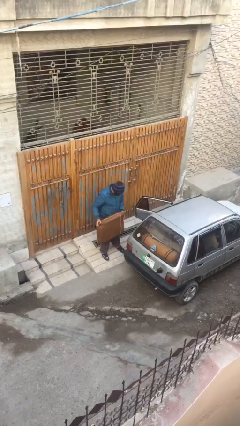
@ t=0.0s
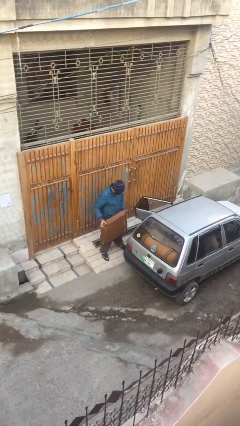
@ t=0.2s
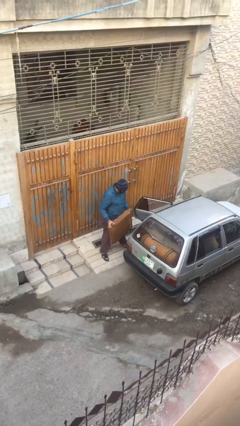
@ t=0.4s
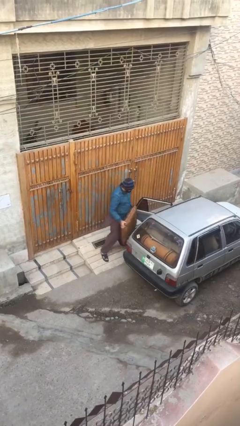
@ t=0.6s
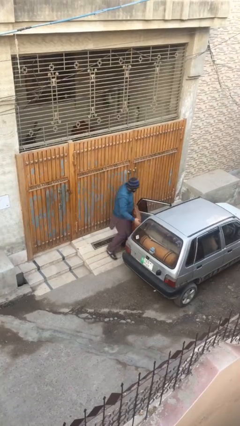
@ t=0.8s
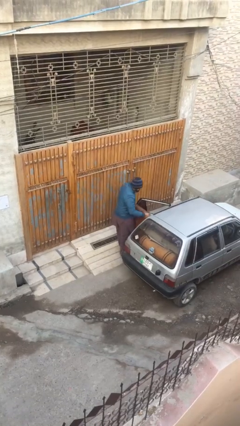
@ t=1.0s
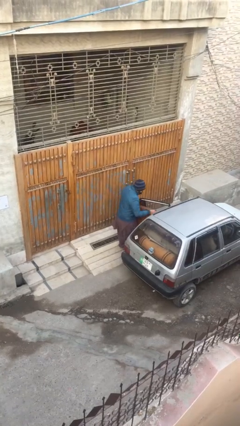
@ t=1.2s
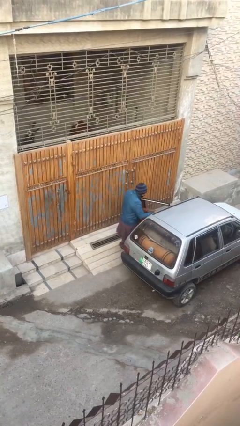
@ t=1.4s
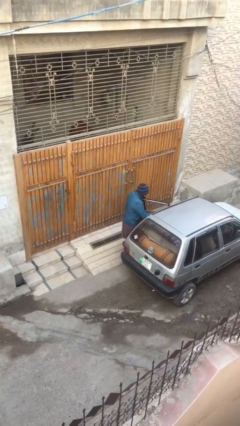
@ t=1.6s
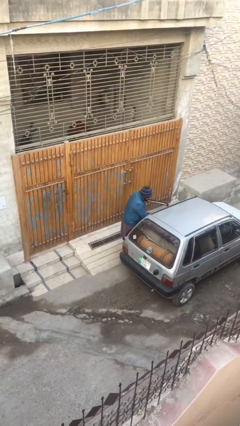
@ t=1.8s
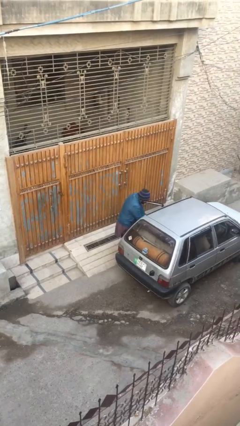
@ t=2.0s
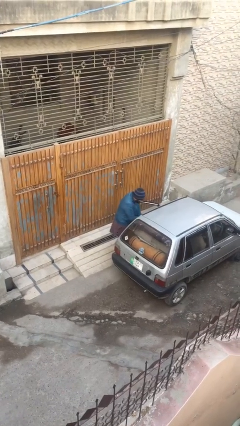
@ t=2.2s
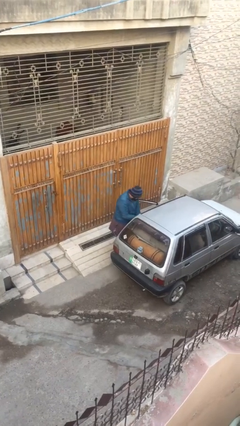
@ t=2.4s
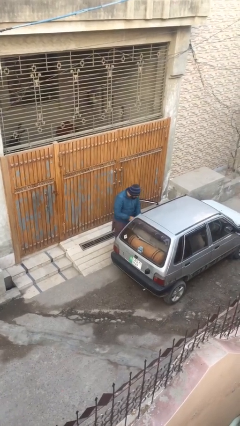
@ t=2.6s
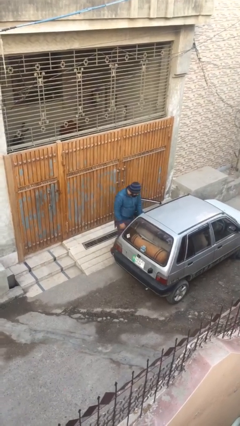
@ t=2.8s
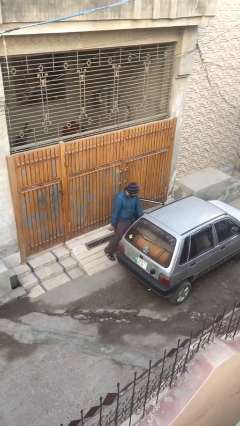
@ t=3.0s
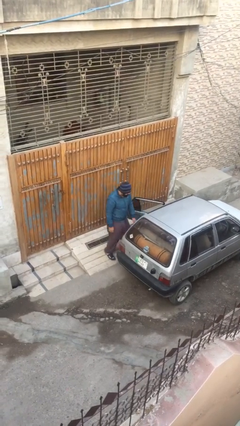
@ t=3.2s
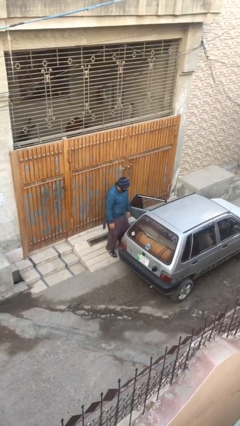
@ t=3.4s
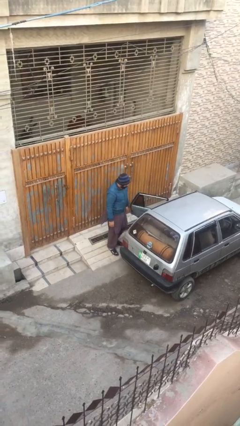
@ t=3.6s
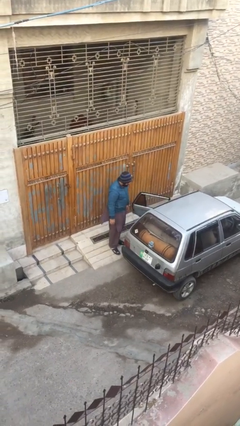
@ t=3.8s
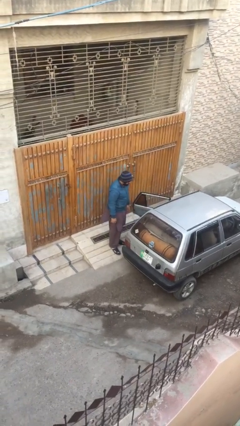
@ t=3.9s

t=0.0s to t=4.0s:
person loads car

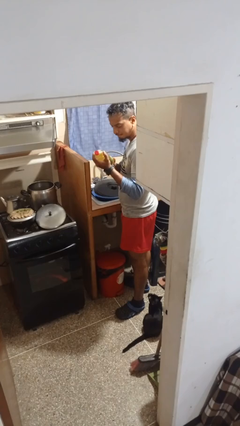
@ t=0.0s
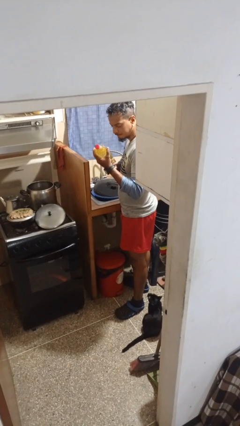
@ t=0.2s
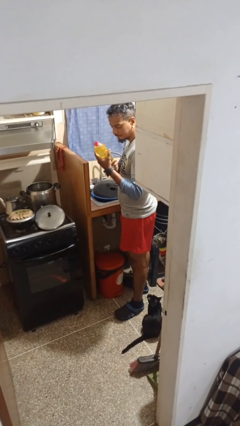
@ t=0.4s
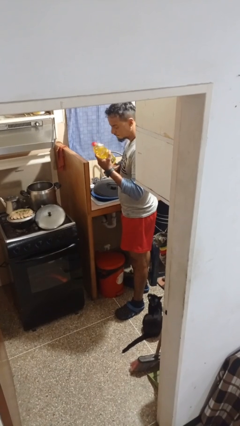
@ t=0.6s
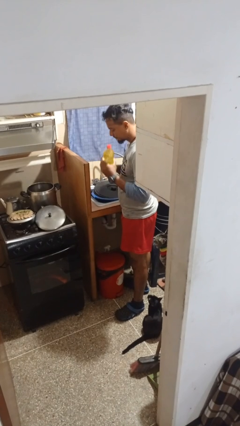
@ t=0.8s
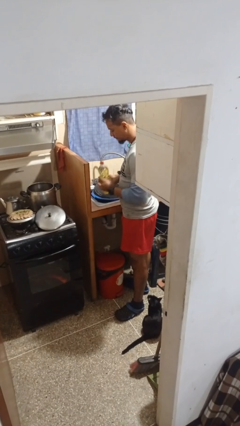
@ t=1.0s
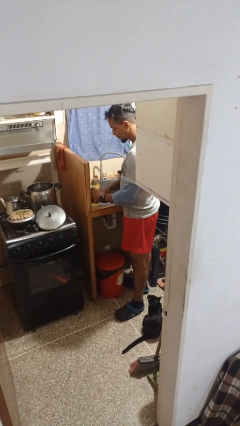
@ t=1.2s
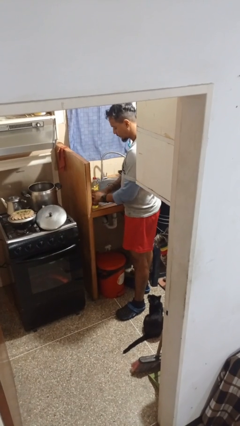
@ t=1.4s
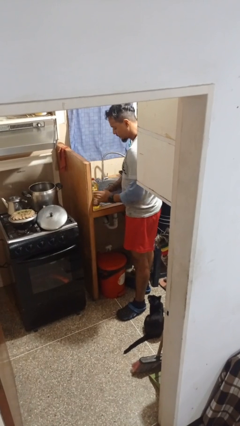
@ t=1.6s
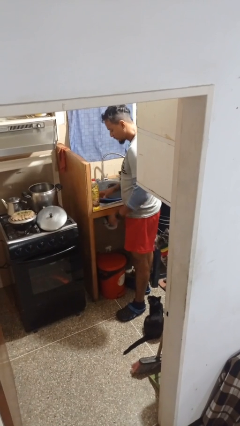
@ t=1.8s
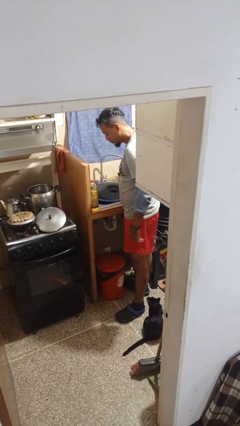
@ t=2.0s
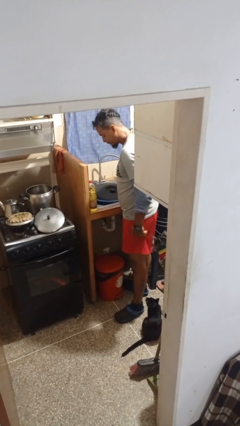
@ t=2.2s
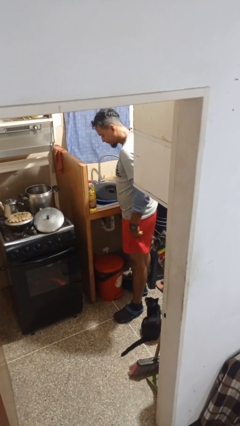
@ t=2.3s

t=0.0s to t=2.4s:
person puts down object on countertop

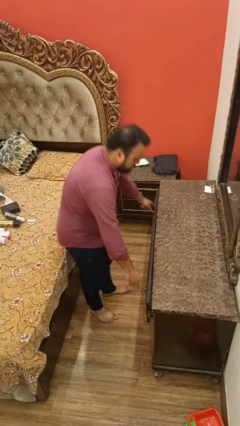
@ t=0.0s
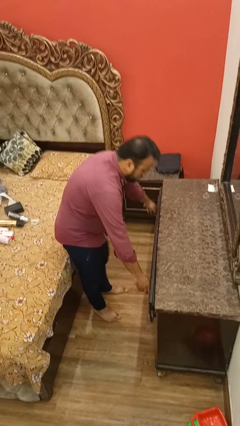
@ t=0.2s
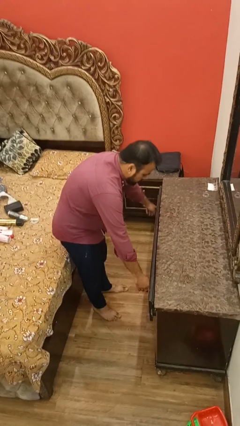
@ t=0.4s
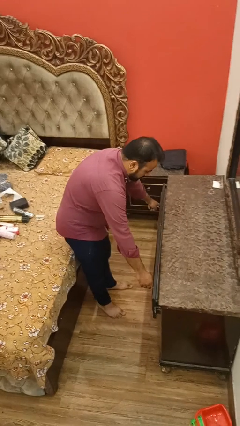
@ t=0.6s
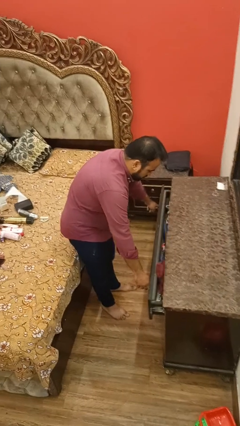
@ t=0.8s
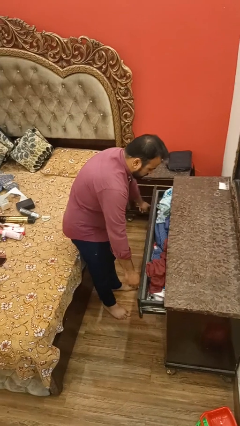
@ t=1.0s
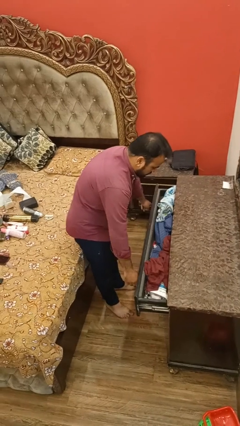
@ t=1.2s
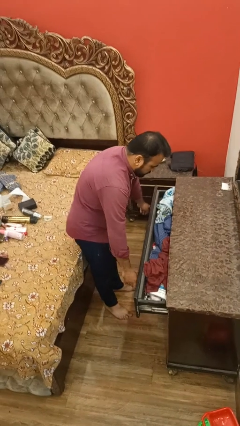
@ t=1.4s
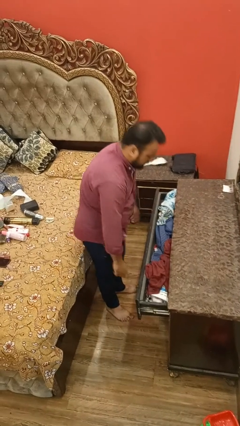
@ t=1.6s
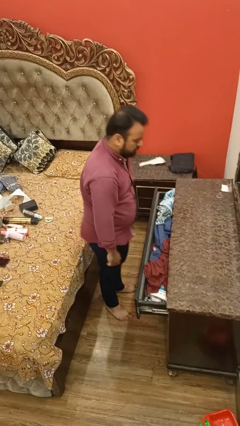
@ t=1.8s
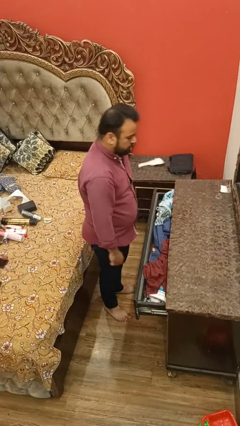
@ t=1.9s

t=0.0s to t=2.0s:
person opens dresser drawer

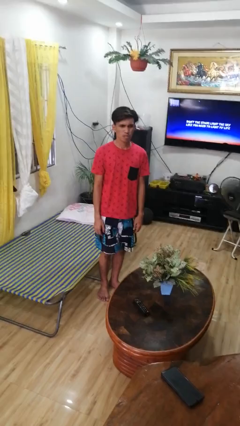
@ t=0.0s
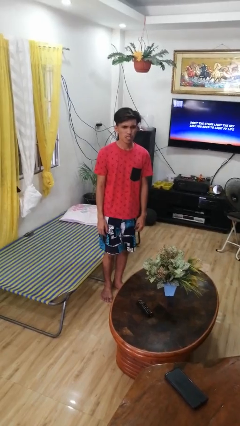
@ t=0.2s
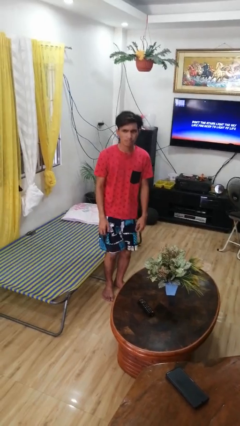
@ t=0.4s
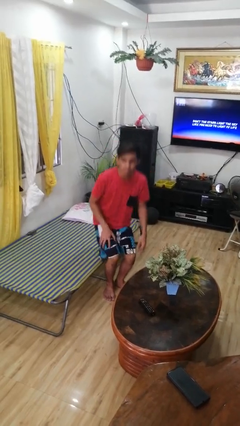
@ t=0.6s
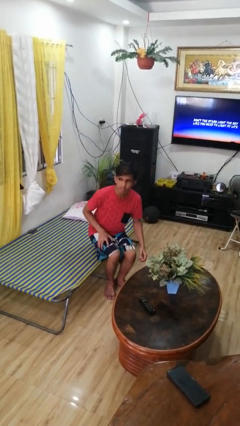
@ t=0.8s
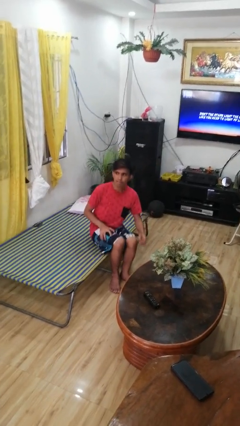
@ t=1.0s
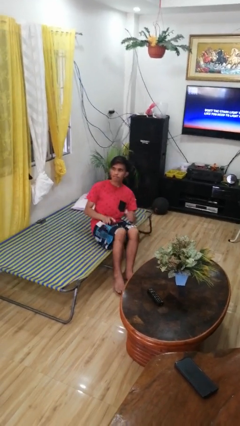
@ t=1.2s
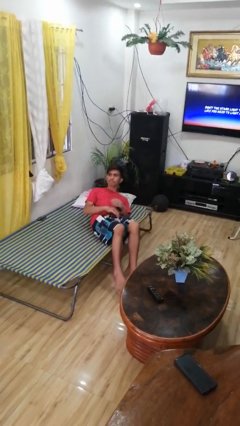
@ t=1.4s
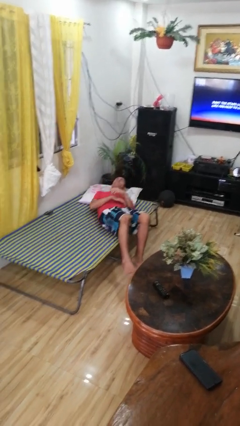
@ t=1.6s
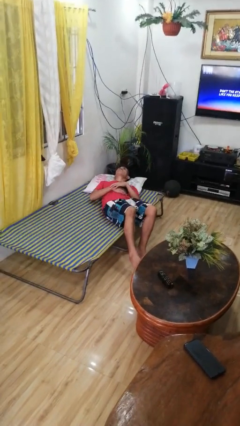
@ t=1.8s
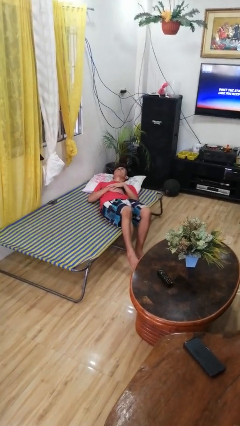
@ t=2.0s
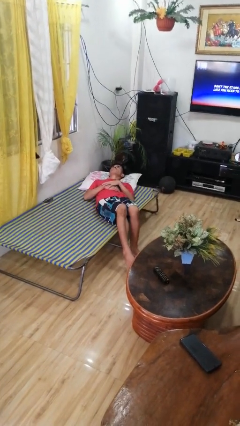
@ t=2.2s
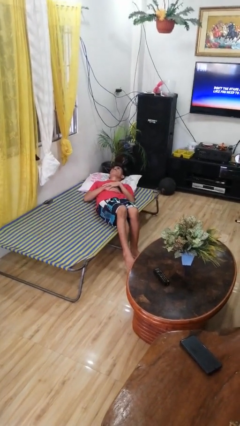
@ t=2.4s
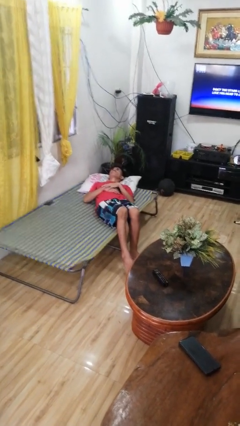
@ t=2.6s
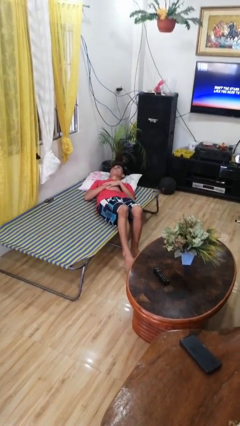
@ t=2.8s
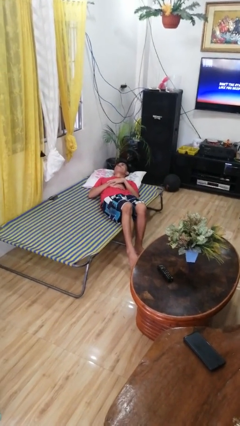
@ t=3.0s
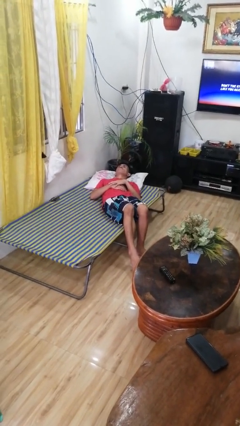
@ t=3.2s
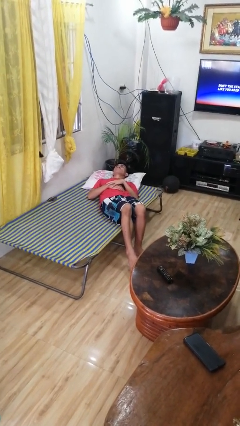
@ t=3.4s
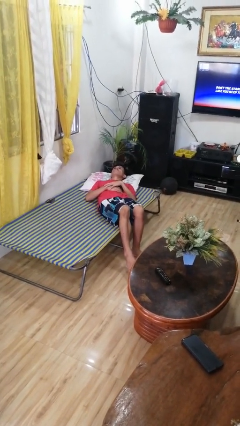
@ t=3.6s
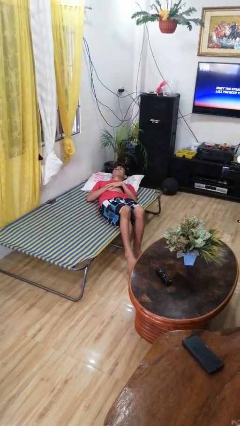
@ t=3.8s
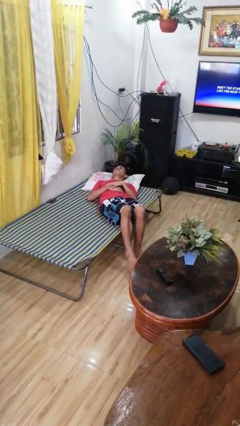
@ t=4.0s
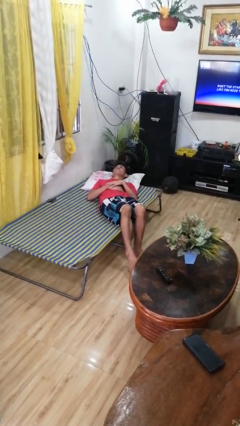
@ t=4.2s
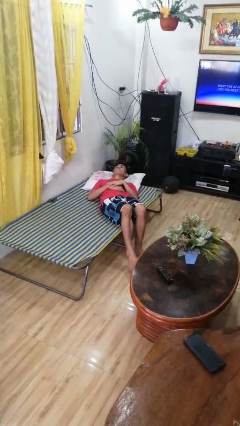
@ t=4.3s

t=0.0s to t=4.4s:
person lies down on bed

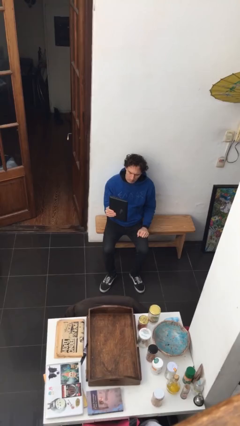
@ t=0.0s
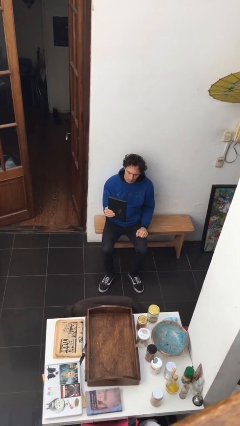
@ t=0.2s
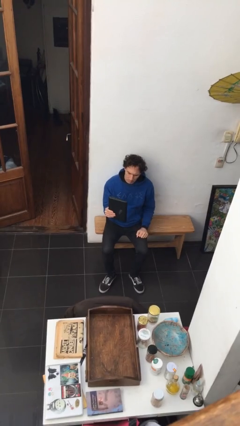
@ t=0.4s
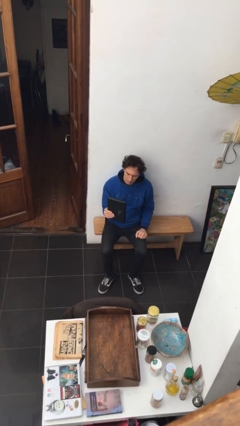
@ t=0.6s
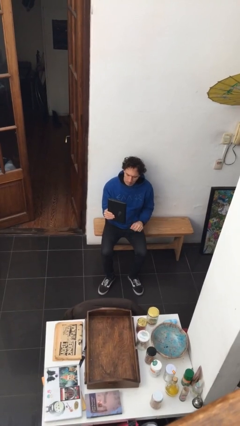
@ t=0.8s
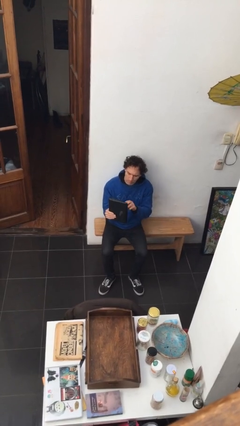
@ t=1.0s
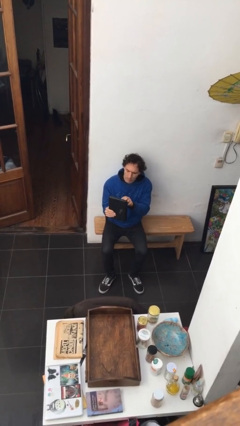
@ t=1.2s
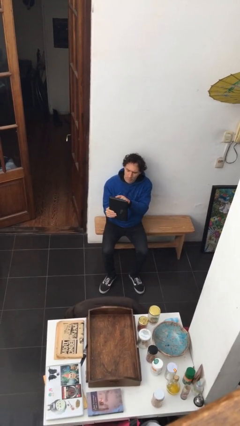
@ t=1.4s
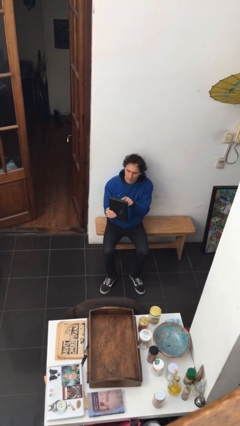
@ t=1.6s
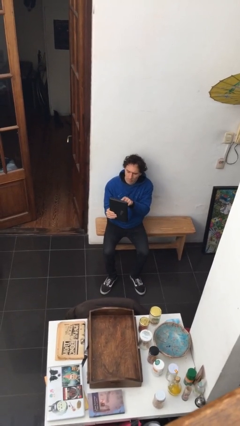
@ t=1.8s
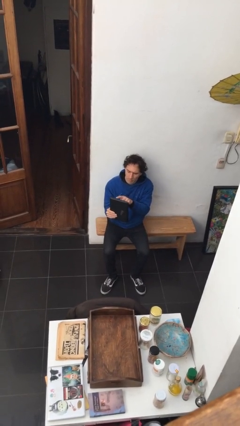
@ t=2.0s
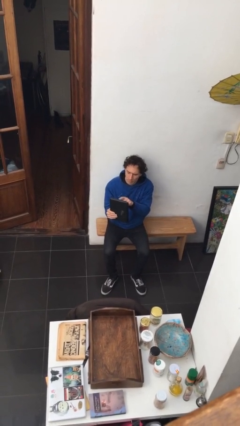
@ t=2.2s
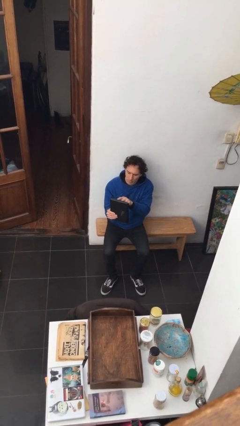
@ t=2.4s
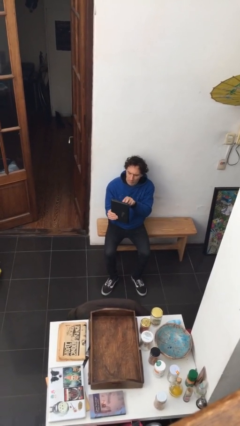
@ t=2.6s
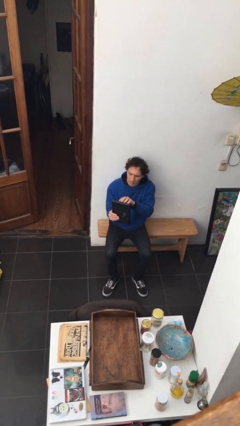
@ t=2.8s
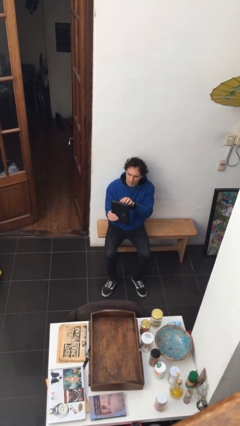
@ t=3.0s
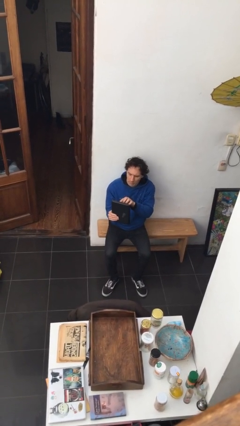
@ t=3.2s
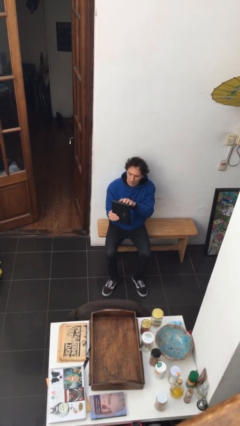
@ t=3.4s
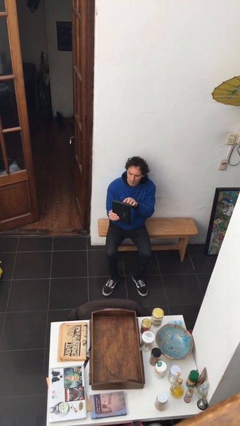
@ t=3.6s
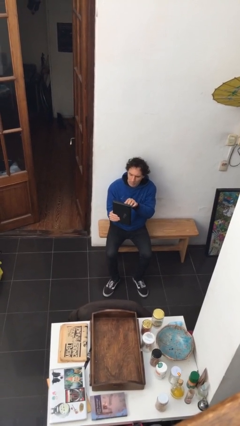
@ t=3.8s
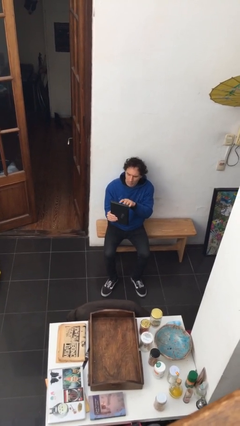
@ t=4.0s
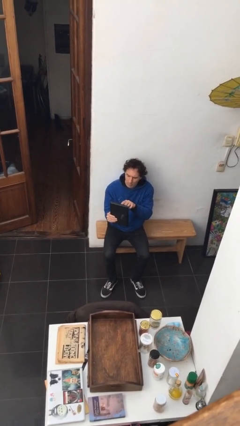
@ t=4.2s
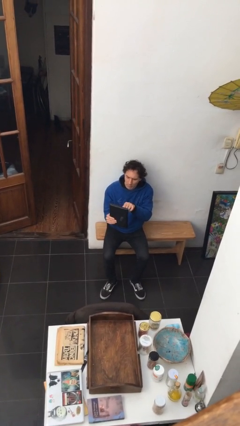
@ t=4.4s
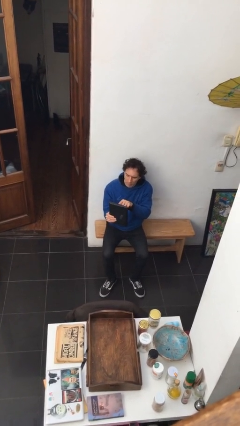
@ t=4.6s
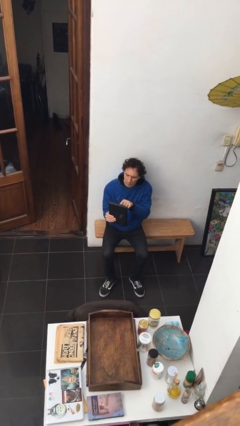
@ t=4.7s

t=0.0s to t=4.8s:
person interacts with tablet
